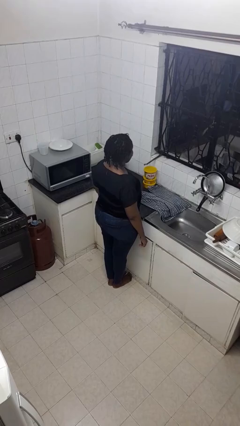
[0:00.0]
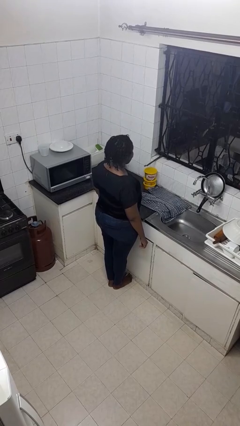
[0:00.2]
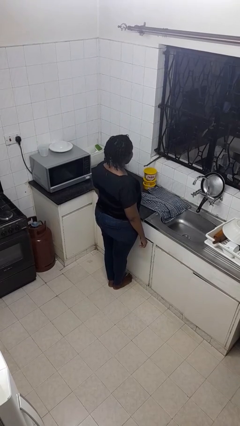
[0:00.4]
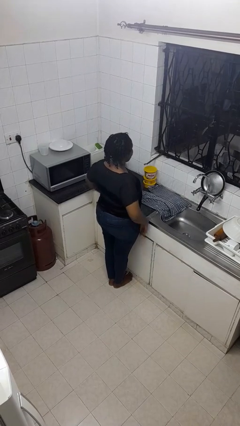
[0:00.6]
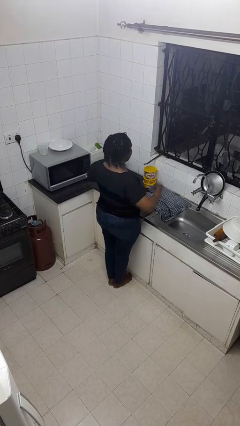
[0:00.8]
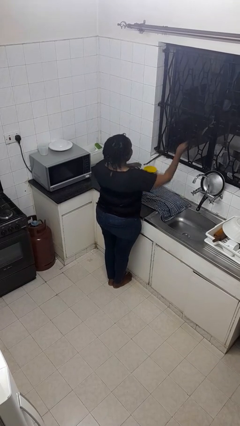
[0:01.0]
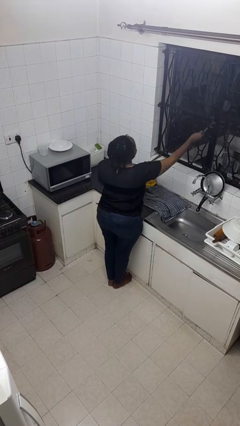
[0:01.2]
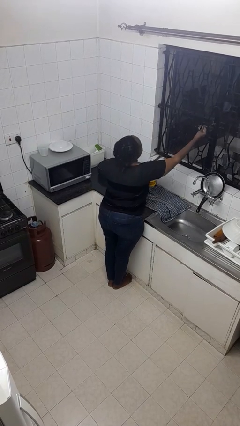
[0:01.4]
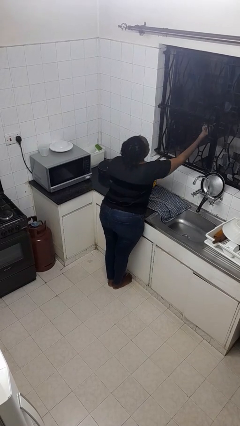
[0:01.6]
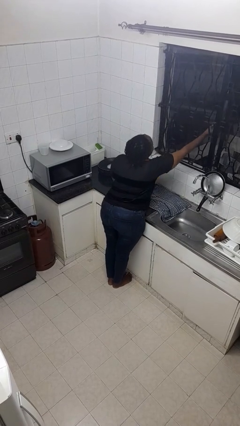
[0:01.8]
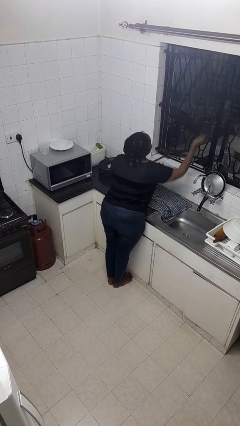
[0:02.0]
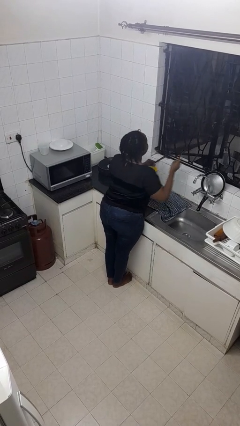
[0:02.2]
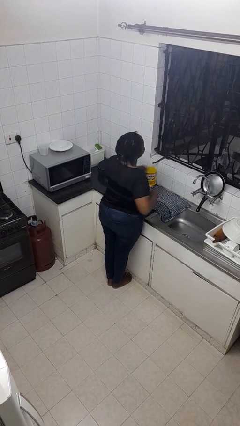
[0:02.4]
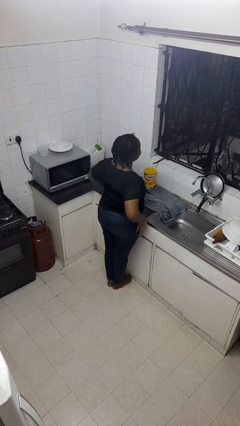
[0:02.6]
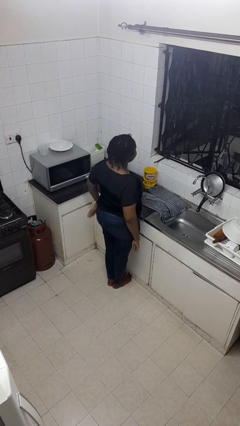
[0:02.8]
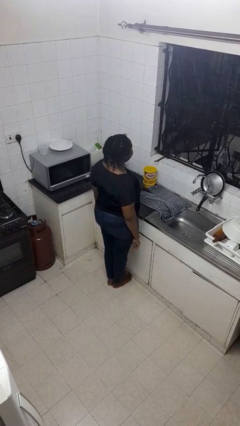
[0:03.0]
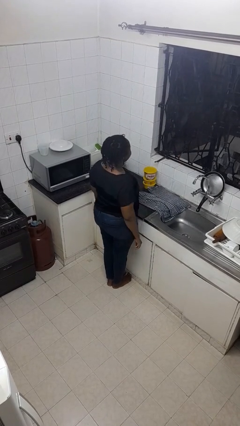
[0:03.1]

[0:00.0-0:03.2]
person opens home window

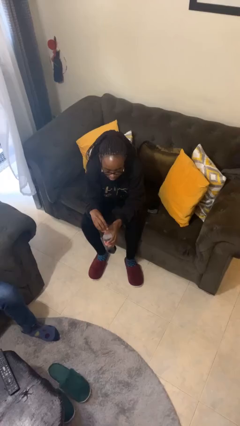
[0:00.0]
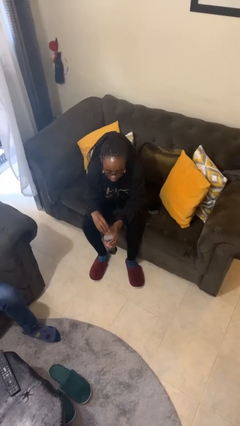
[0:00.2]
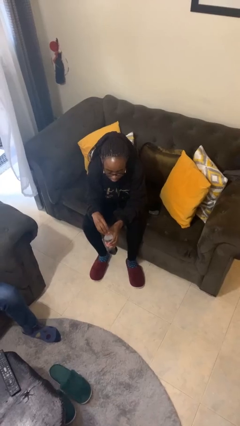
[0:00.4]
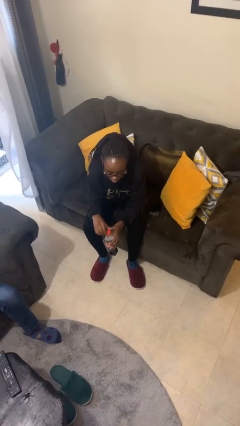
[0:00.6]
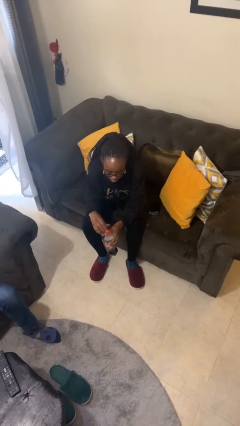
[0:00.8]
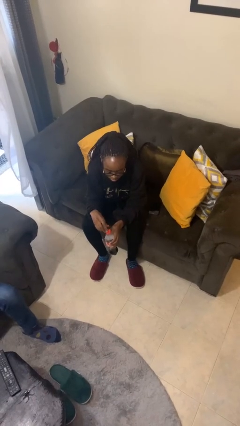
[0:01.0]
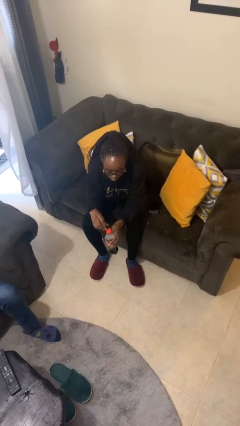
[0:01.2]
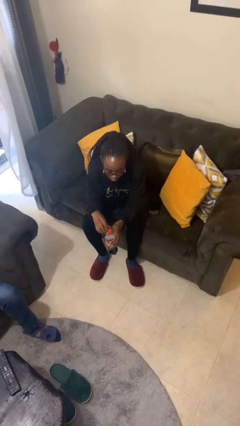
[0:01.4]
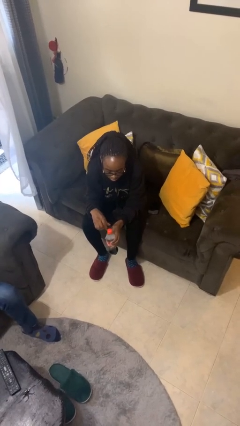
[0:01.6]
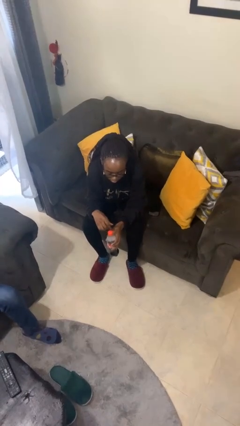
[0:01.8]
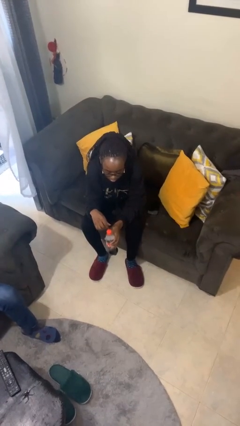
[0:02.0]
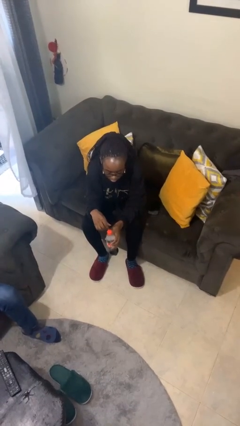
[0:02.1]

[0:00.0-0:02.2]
person screws lid to bottle

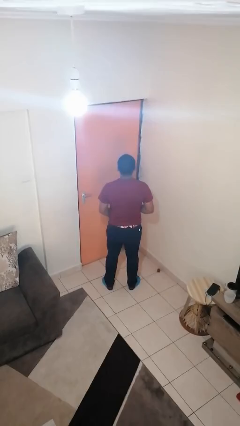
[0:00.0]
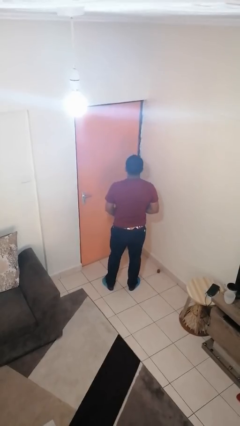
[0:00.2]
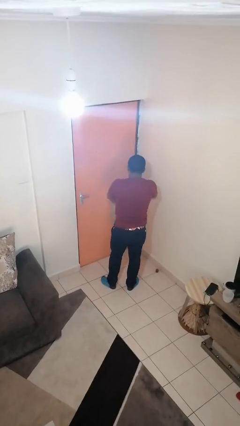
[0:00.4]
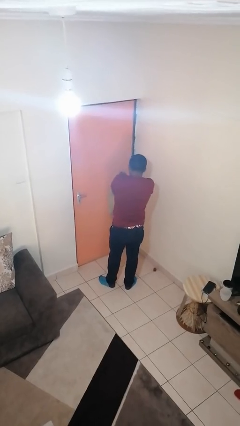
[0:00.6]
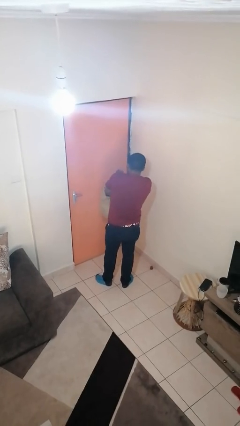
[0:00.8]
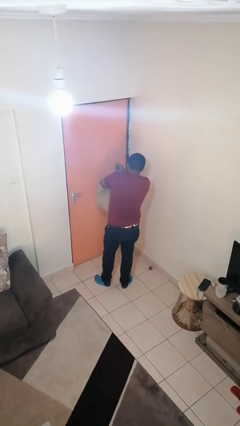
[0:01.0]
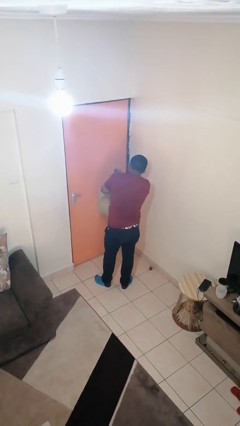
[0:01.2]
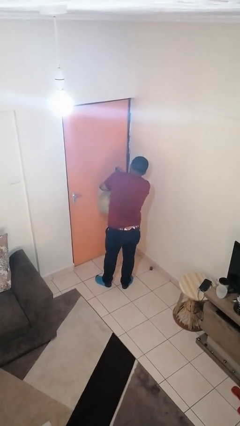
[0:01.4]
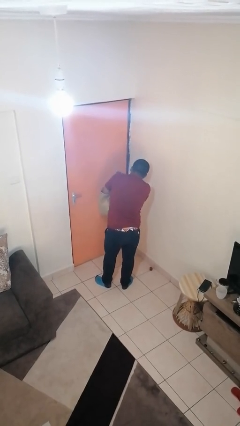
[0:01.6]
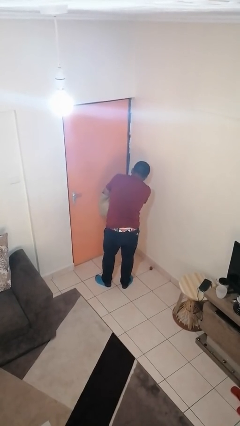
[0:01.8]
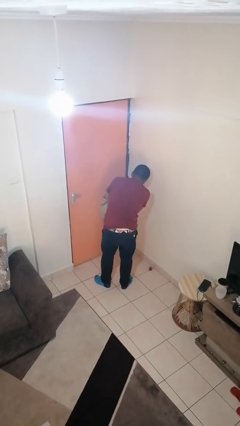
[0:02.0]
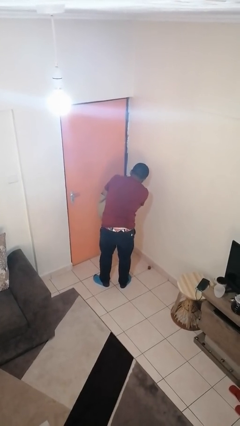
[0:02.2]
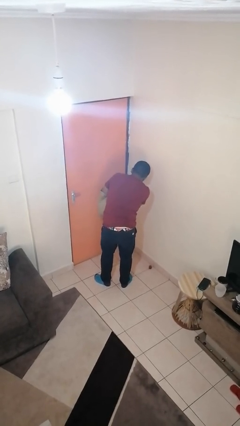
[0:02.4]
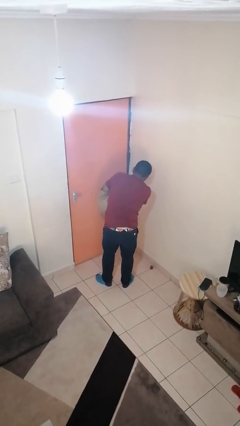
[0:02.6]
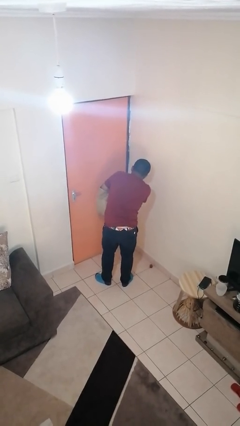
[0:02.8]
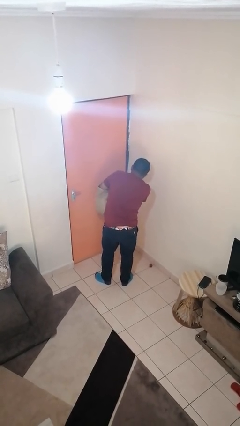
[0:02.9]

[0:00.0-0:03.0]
person searches in bag

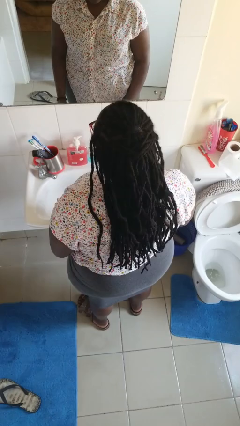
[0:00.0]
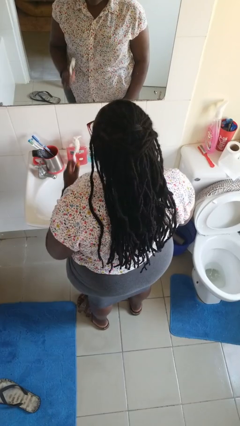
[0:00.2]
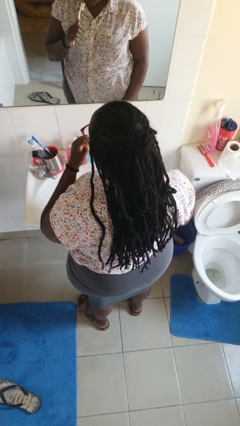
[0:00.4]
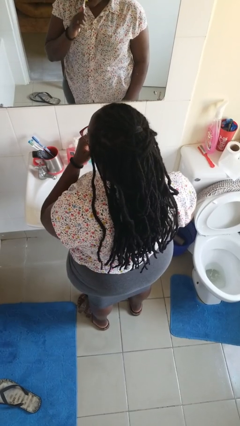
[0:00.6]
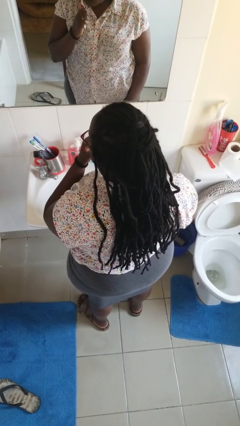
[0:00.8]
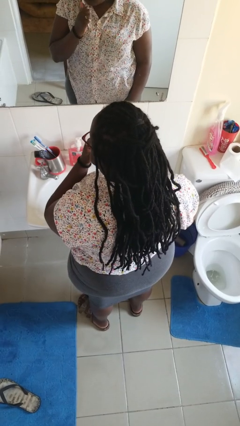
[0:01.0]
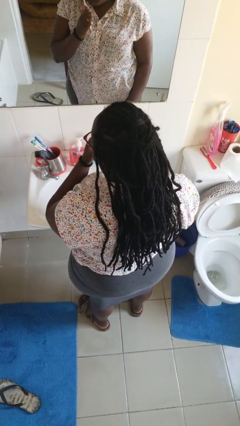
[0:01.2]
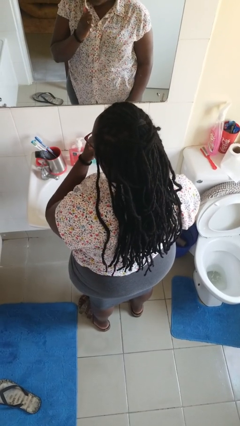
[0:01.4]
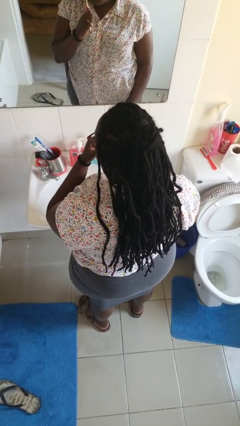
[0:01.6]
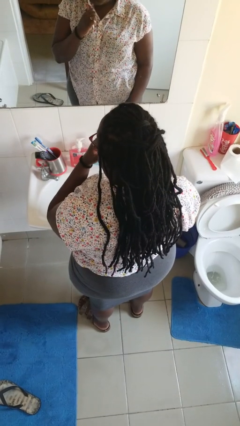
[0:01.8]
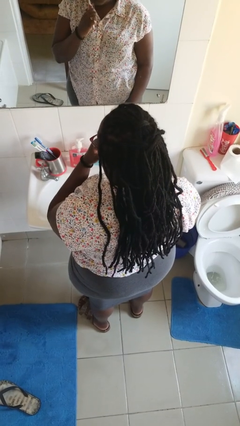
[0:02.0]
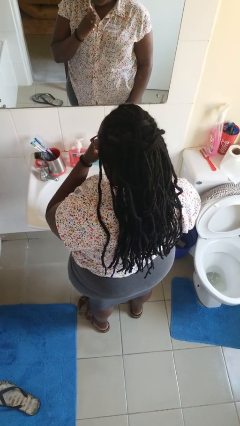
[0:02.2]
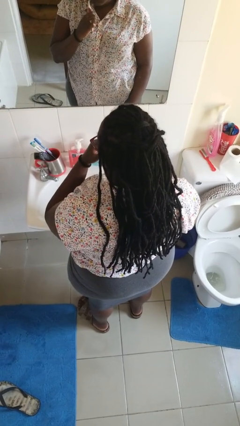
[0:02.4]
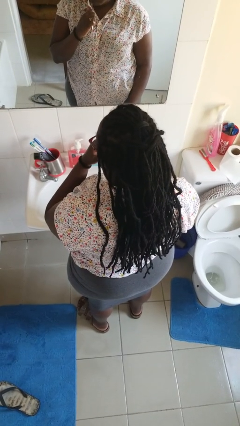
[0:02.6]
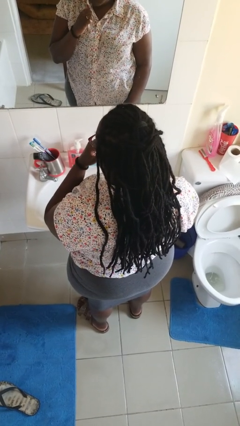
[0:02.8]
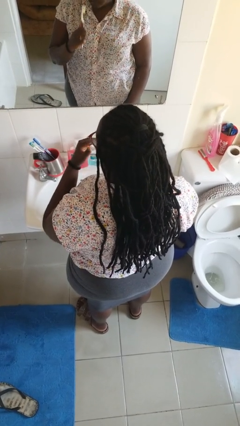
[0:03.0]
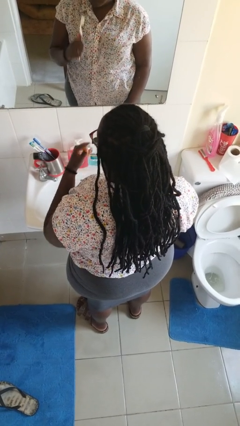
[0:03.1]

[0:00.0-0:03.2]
person brushes teeth

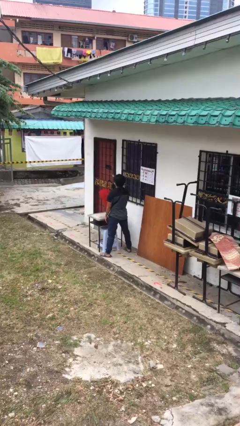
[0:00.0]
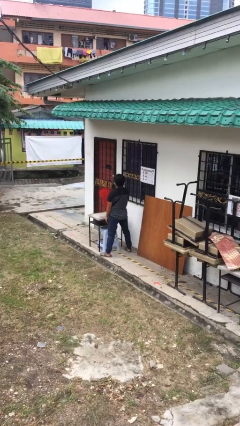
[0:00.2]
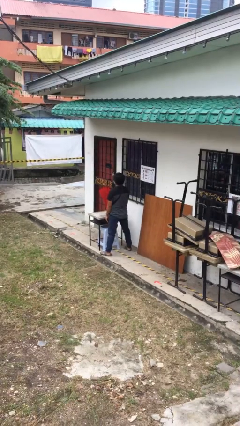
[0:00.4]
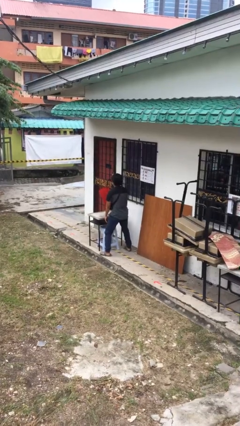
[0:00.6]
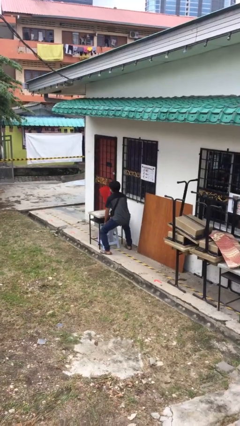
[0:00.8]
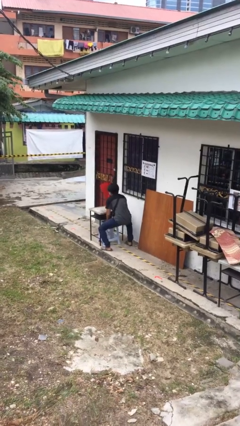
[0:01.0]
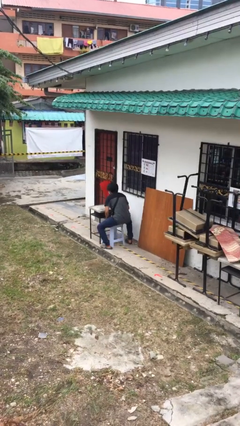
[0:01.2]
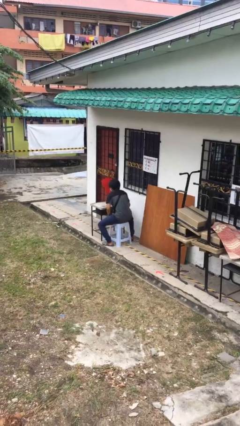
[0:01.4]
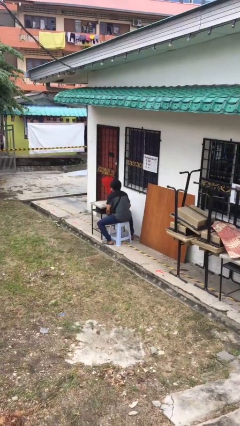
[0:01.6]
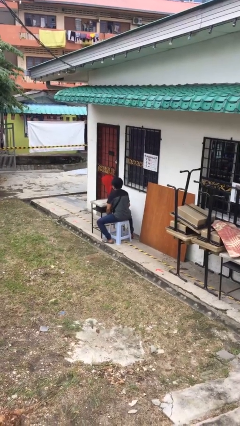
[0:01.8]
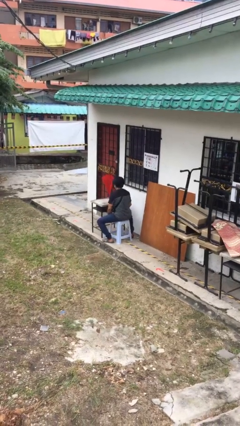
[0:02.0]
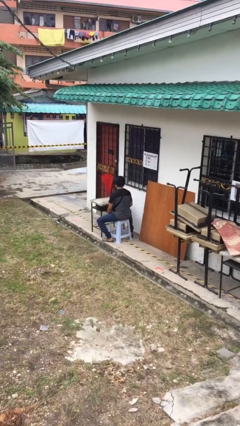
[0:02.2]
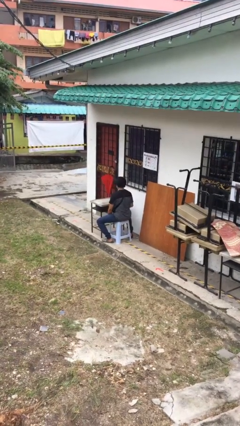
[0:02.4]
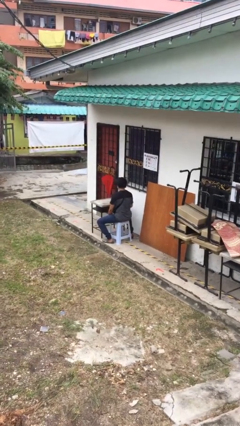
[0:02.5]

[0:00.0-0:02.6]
person sits down

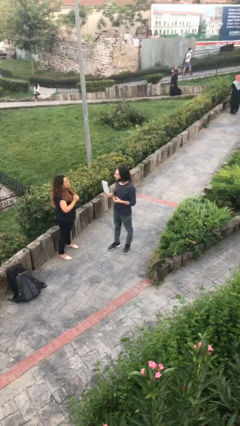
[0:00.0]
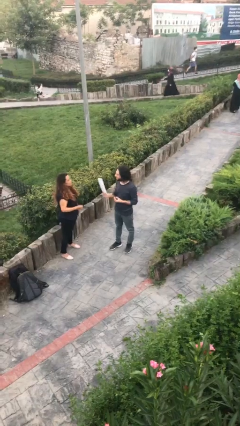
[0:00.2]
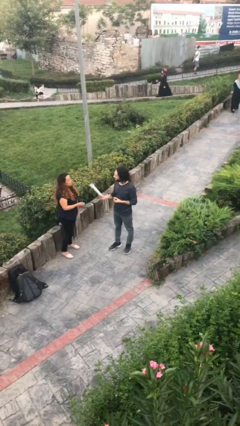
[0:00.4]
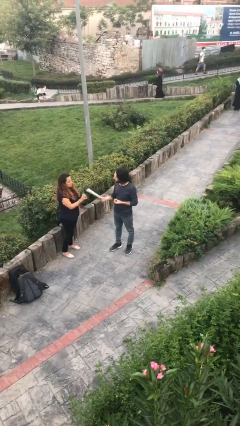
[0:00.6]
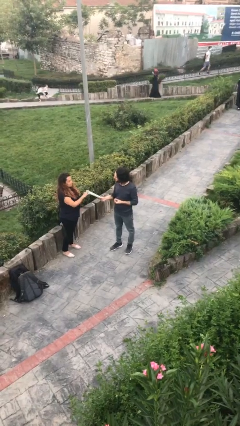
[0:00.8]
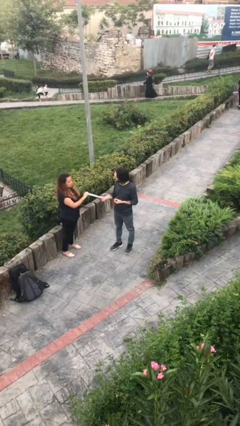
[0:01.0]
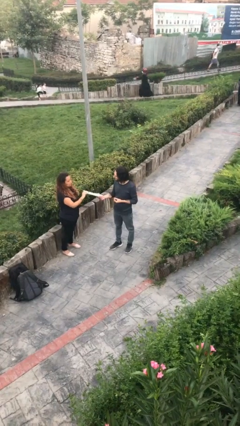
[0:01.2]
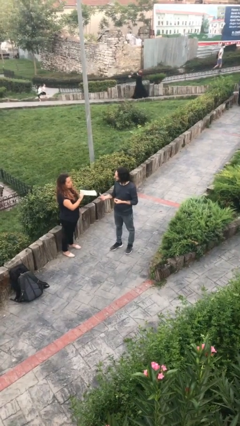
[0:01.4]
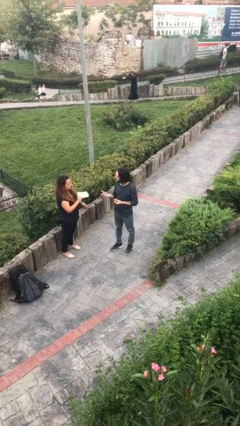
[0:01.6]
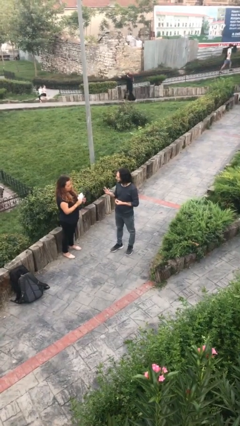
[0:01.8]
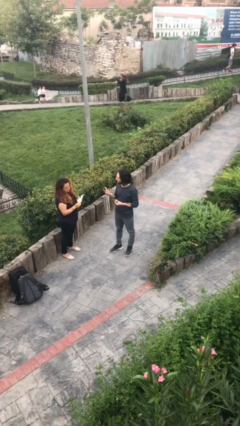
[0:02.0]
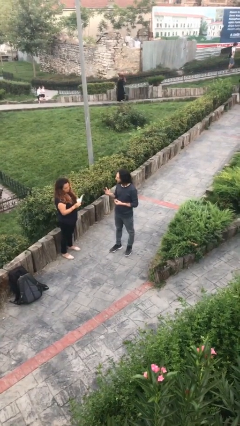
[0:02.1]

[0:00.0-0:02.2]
person transfers object to person

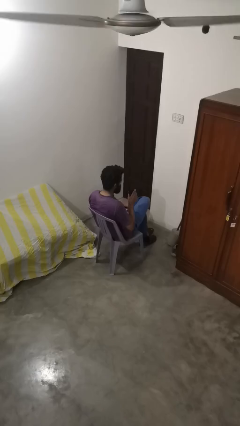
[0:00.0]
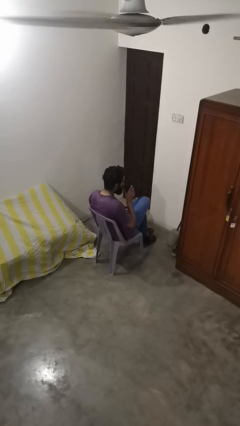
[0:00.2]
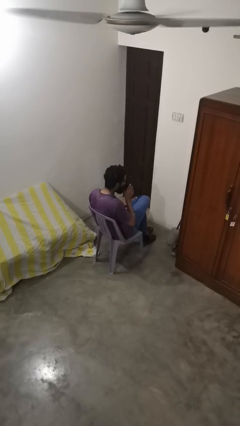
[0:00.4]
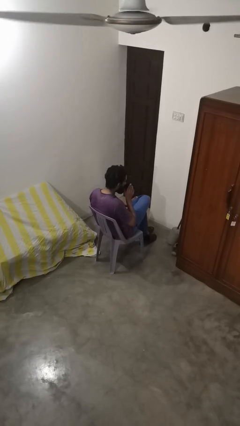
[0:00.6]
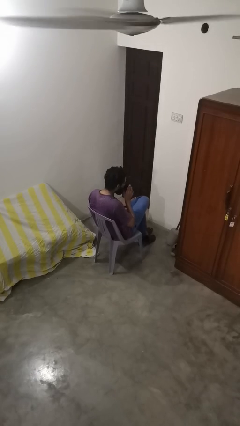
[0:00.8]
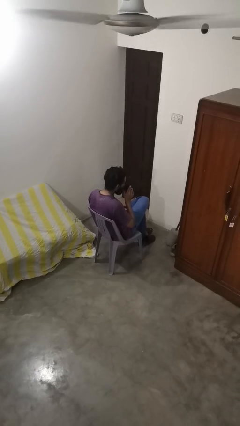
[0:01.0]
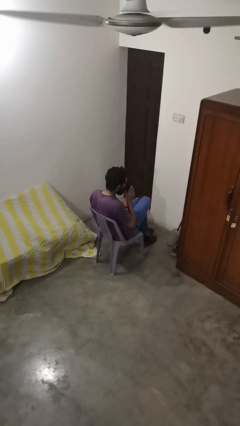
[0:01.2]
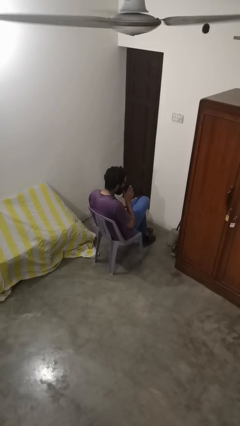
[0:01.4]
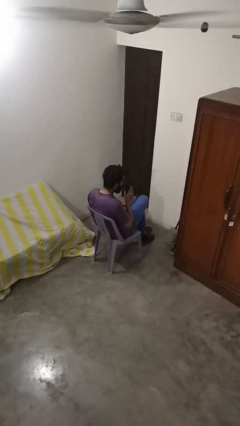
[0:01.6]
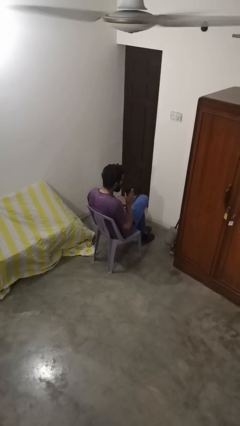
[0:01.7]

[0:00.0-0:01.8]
person drinks from straw
